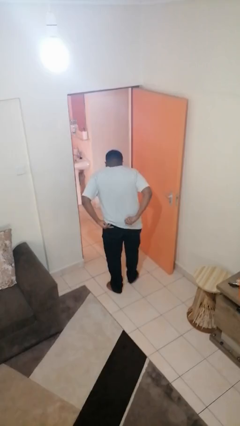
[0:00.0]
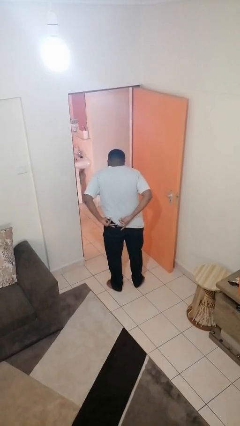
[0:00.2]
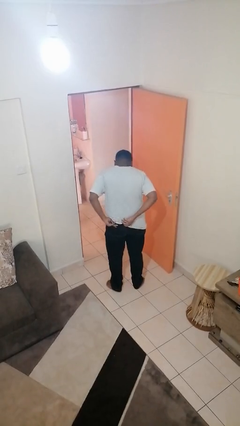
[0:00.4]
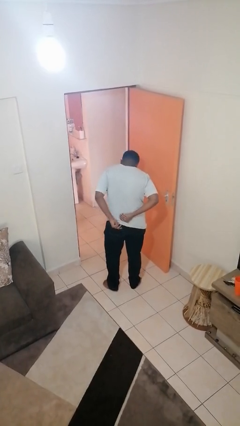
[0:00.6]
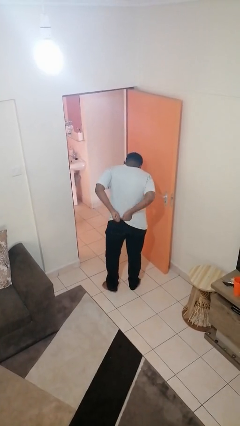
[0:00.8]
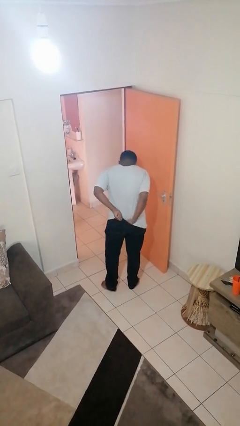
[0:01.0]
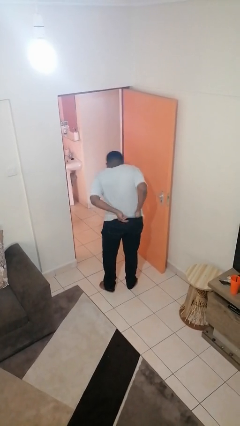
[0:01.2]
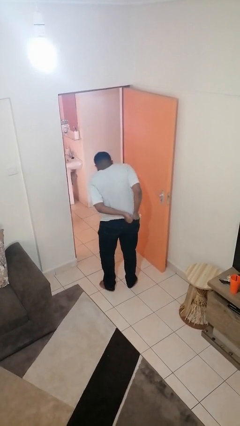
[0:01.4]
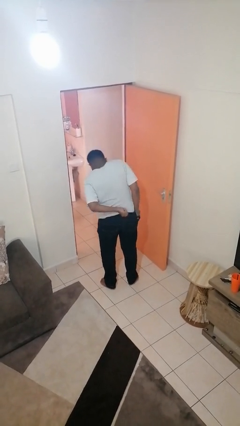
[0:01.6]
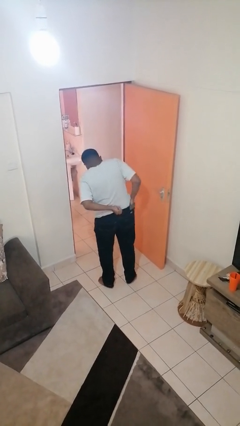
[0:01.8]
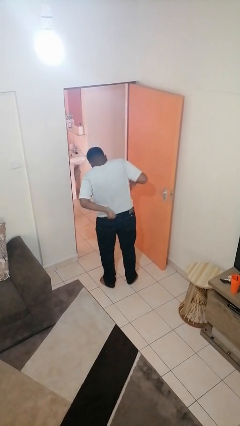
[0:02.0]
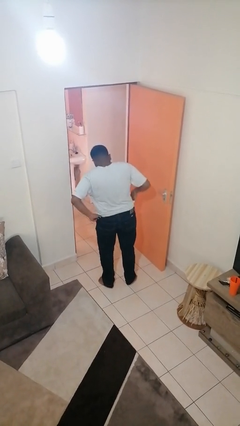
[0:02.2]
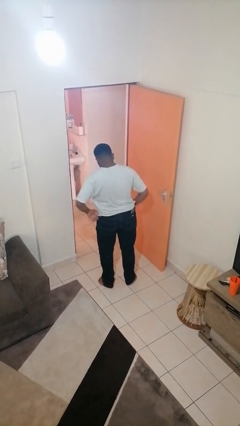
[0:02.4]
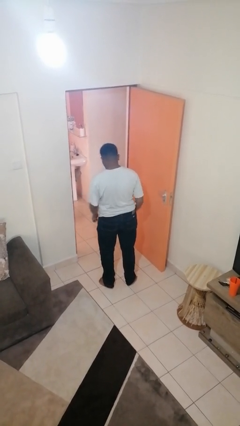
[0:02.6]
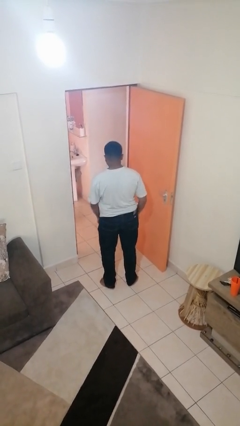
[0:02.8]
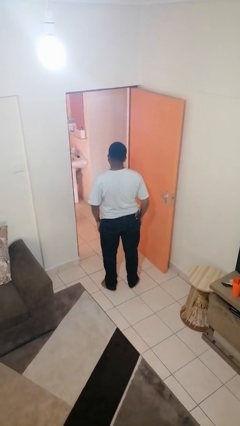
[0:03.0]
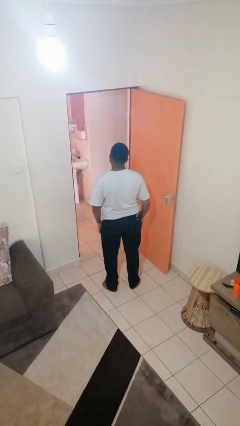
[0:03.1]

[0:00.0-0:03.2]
person tucks in shirt

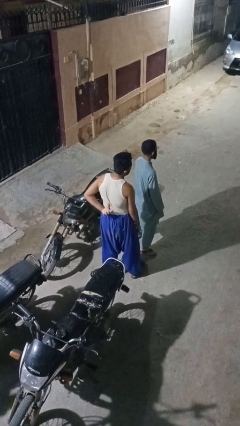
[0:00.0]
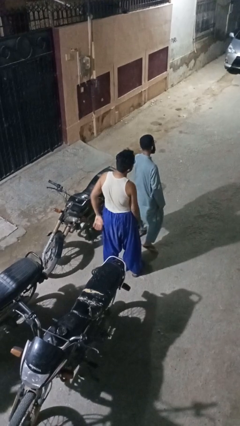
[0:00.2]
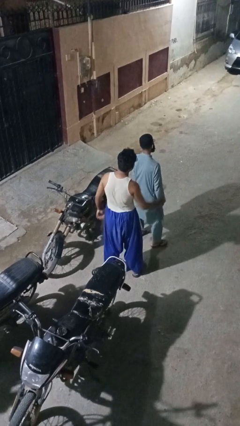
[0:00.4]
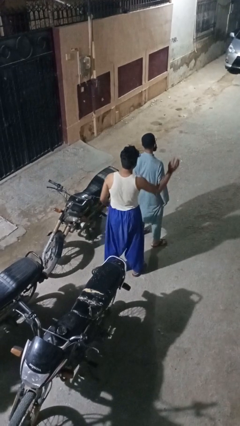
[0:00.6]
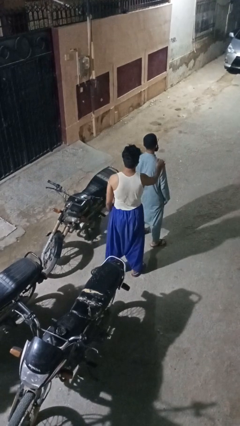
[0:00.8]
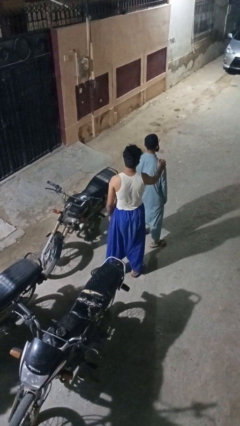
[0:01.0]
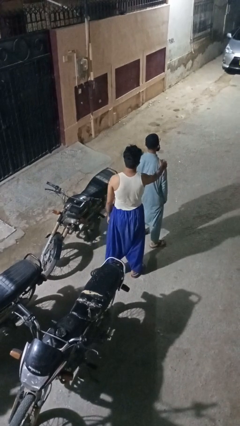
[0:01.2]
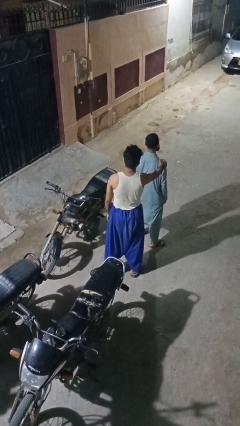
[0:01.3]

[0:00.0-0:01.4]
person grabs person by shoulder

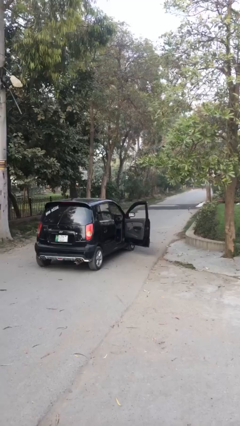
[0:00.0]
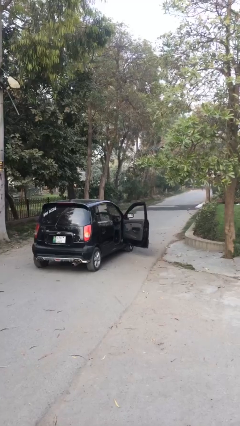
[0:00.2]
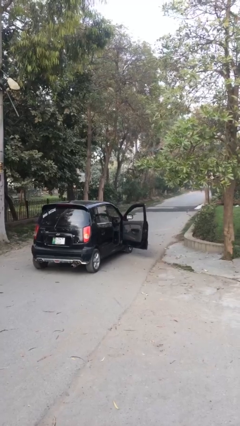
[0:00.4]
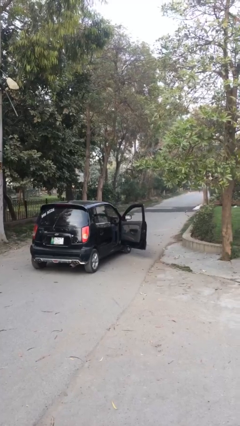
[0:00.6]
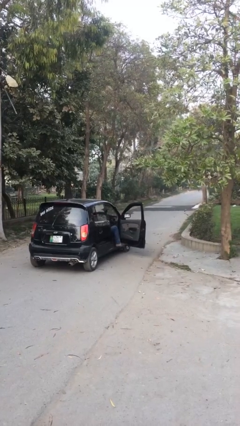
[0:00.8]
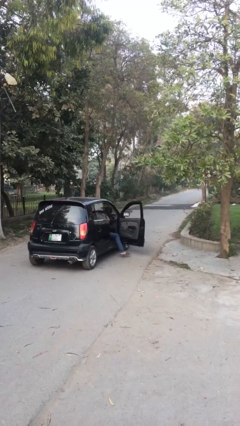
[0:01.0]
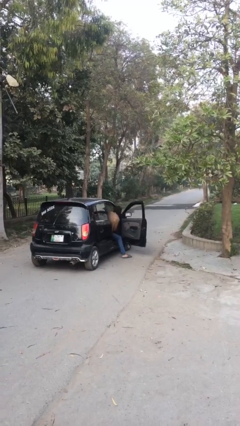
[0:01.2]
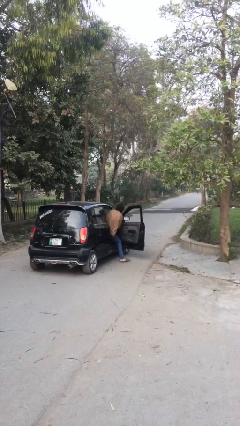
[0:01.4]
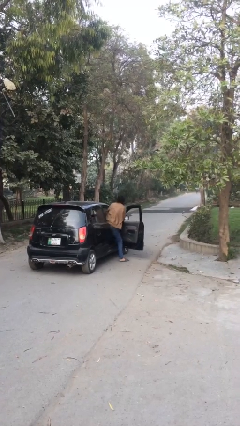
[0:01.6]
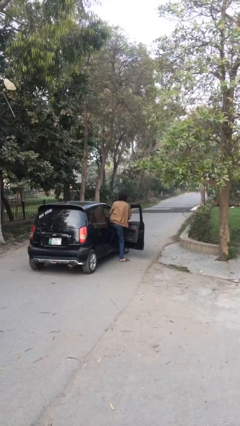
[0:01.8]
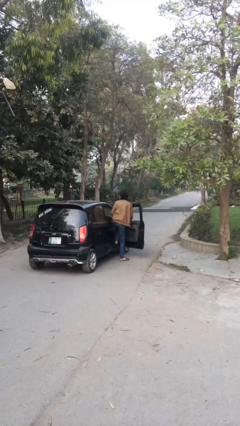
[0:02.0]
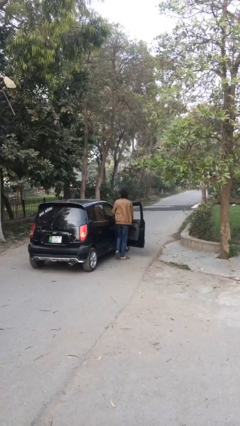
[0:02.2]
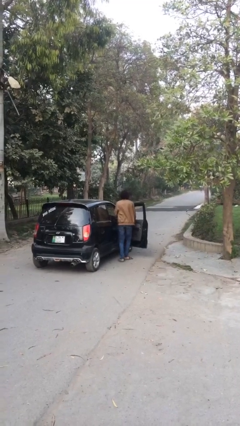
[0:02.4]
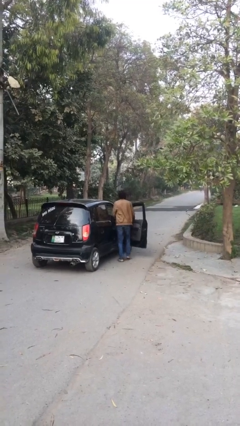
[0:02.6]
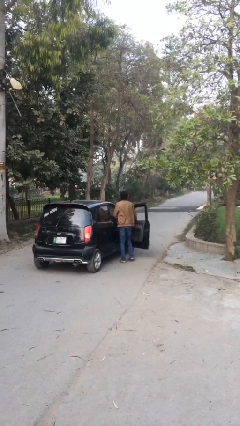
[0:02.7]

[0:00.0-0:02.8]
person exits car

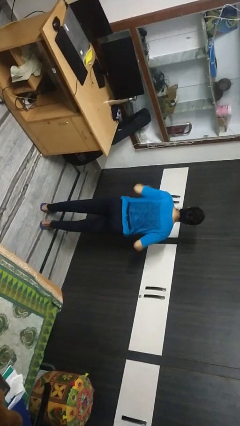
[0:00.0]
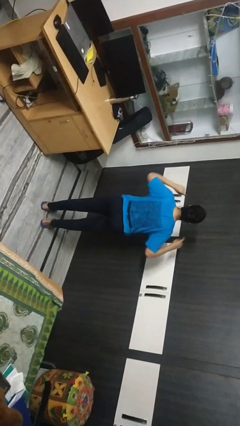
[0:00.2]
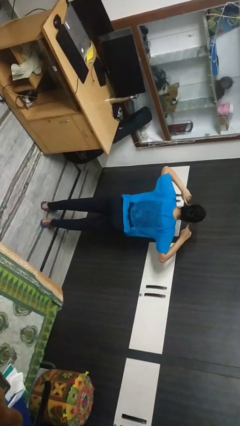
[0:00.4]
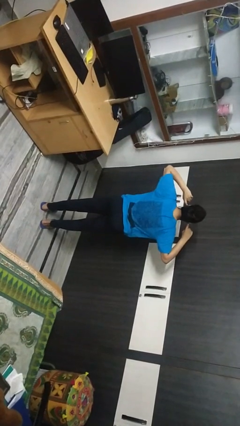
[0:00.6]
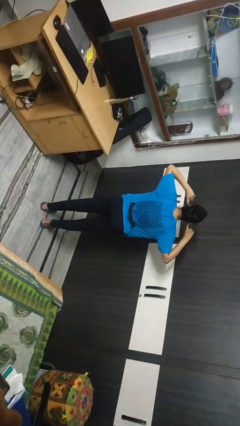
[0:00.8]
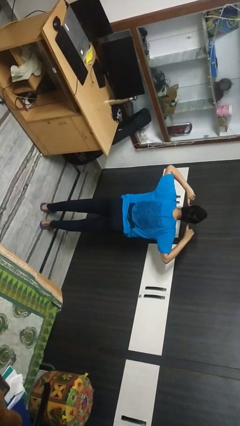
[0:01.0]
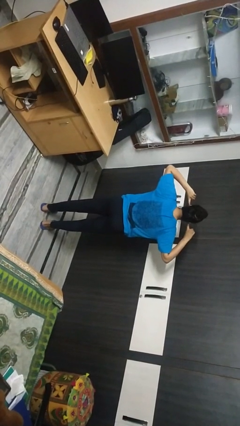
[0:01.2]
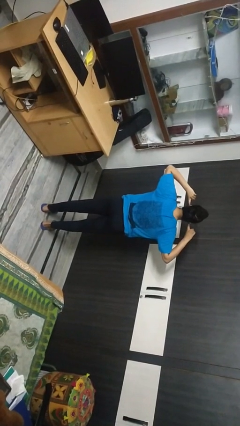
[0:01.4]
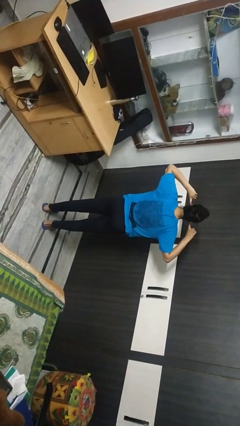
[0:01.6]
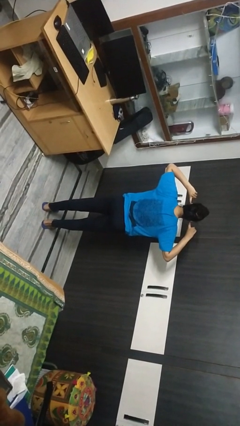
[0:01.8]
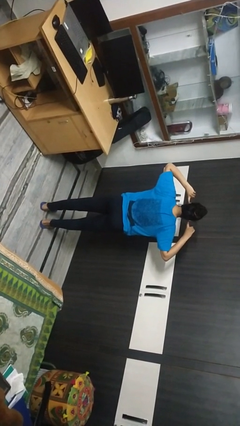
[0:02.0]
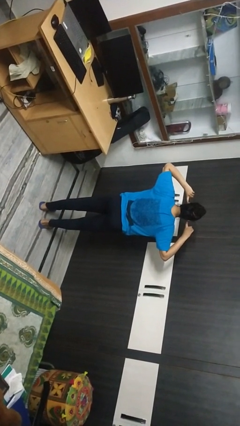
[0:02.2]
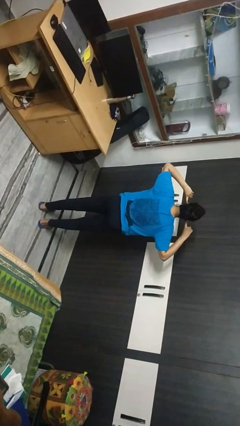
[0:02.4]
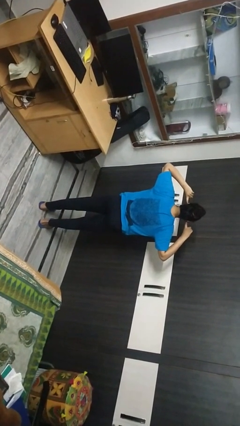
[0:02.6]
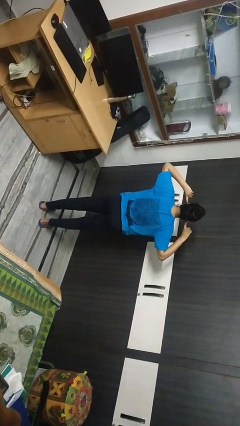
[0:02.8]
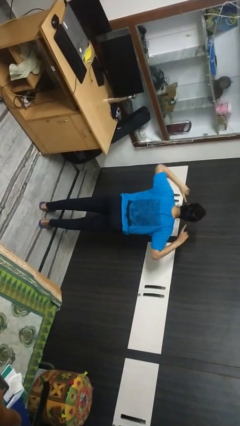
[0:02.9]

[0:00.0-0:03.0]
person puts fingers in ear

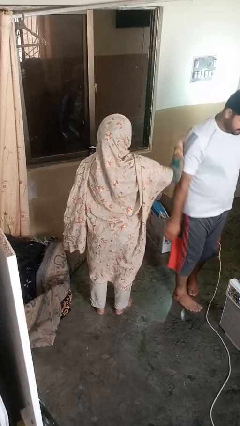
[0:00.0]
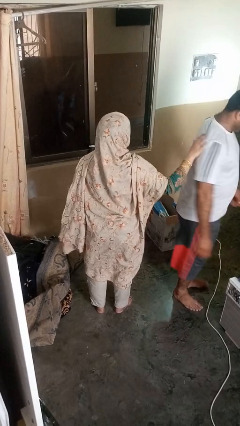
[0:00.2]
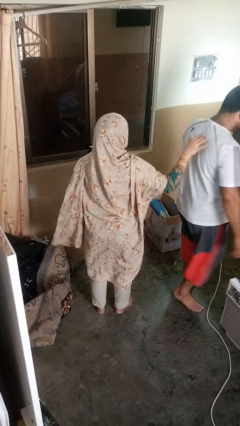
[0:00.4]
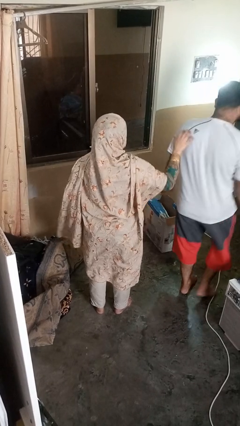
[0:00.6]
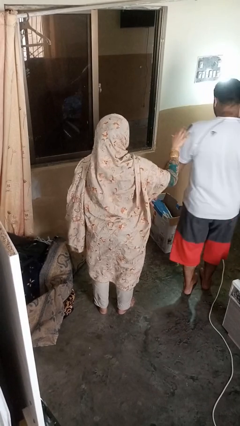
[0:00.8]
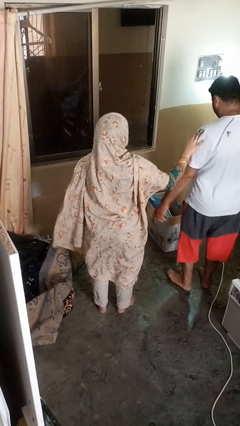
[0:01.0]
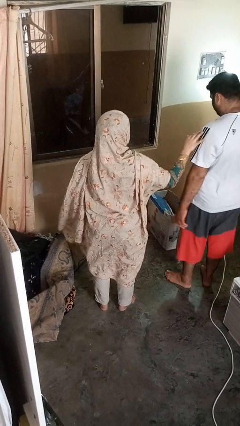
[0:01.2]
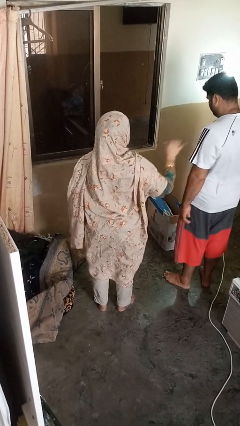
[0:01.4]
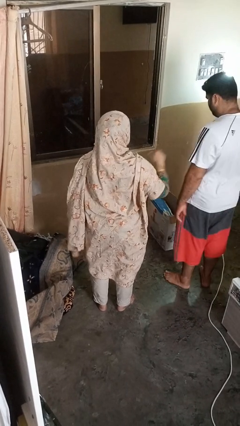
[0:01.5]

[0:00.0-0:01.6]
person spins person around

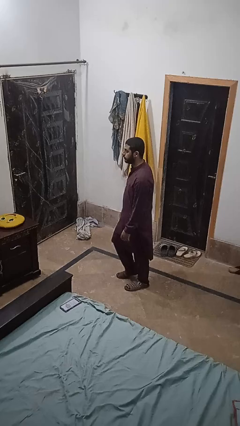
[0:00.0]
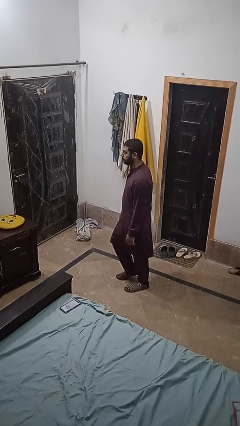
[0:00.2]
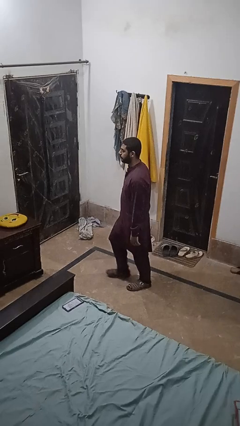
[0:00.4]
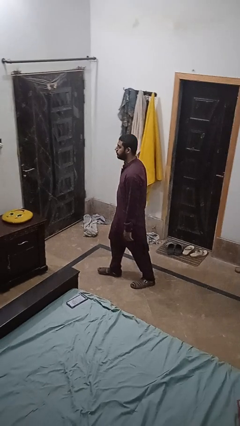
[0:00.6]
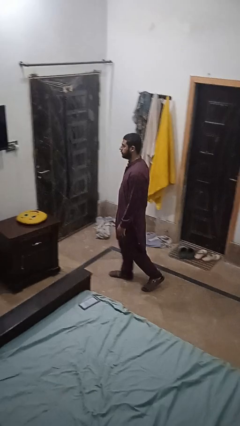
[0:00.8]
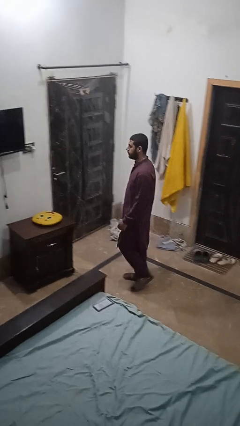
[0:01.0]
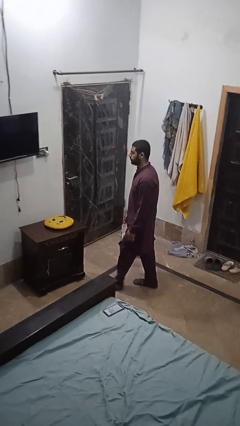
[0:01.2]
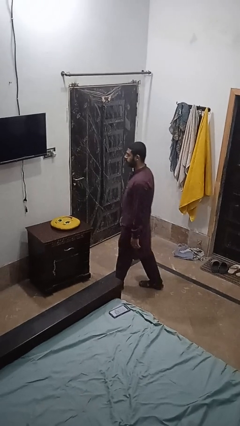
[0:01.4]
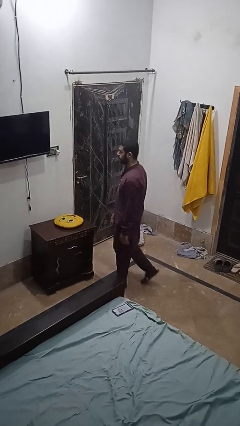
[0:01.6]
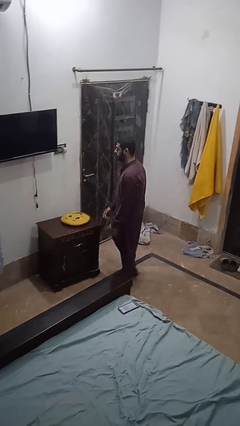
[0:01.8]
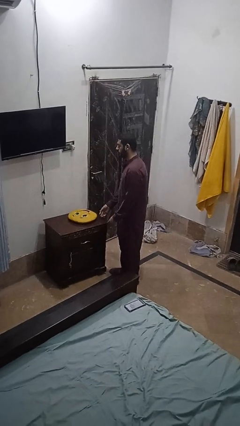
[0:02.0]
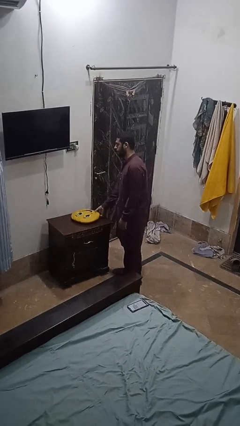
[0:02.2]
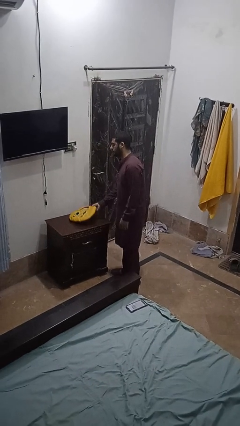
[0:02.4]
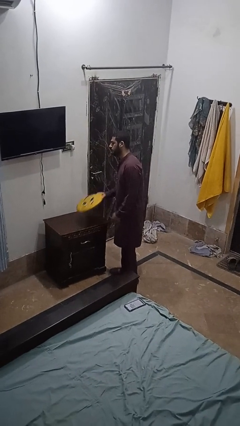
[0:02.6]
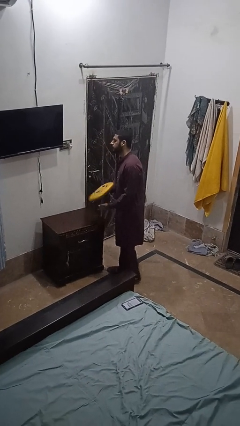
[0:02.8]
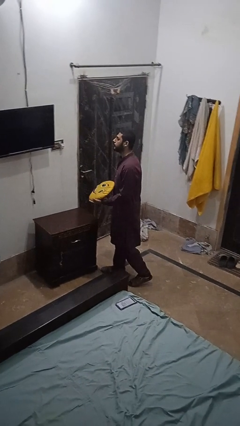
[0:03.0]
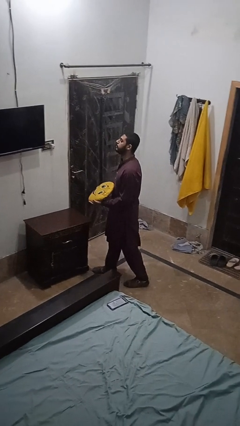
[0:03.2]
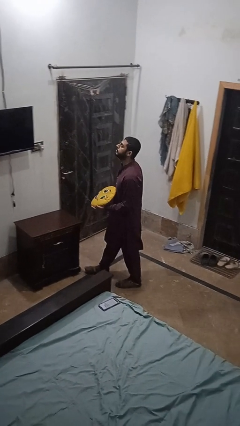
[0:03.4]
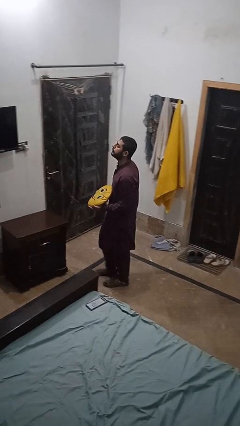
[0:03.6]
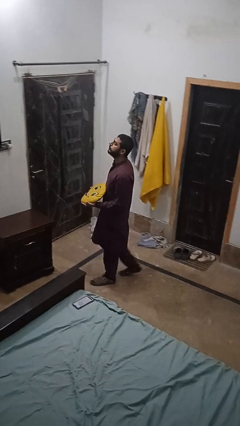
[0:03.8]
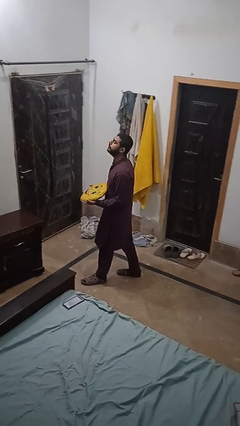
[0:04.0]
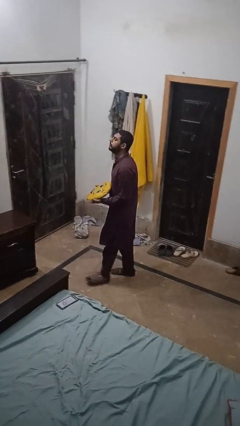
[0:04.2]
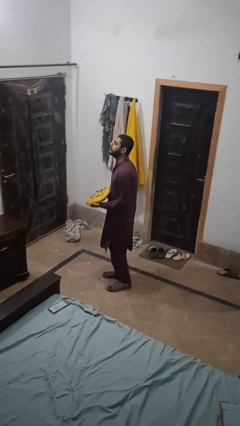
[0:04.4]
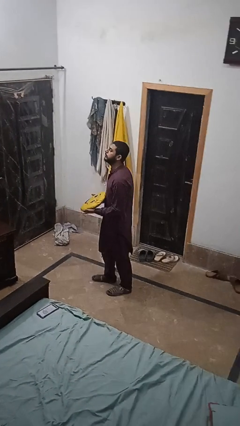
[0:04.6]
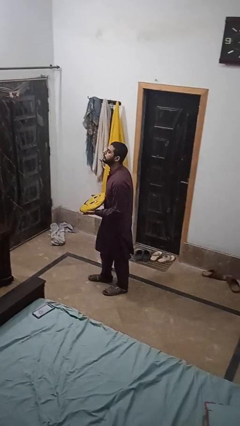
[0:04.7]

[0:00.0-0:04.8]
person picks up object from table

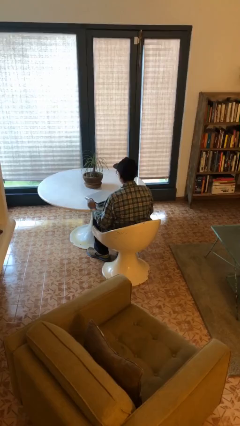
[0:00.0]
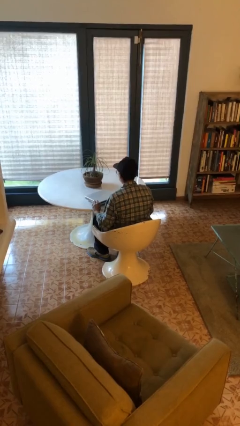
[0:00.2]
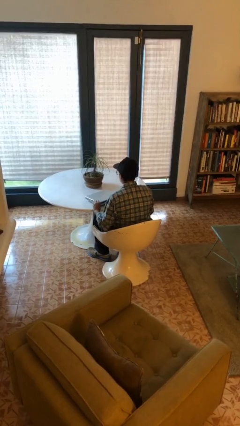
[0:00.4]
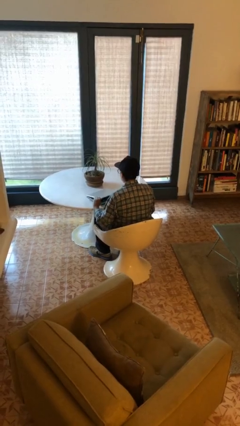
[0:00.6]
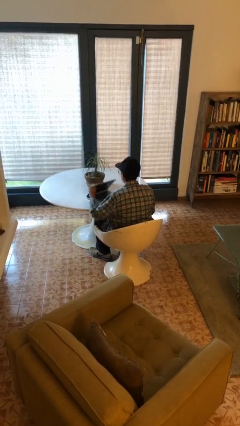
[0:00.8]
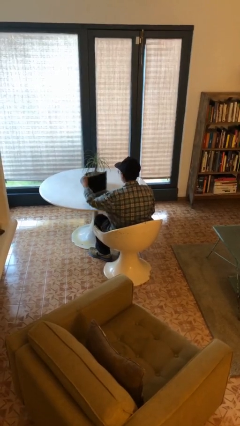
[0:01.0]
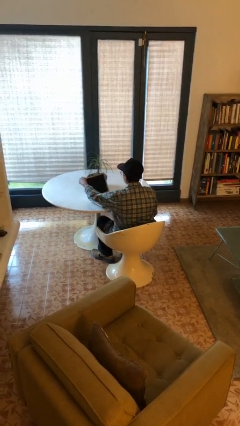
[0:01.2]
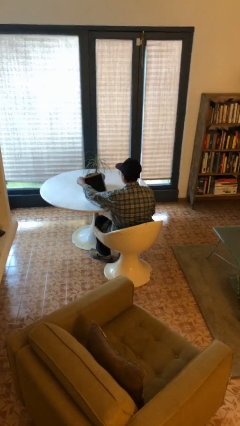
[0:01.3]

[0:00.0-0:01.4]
person opens laptop
